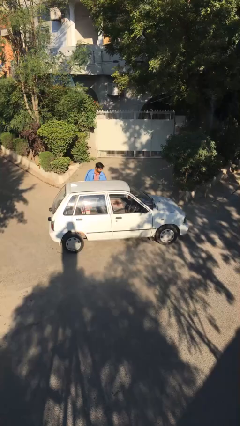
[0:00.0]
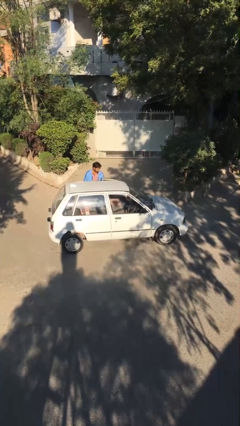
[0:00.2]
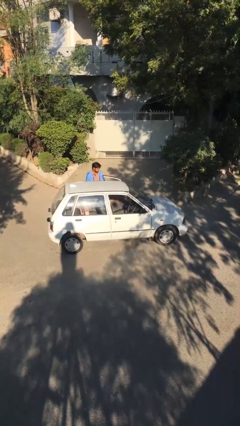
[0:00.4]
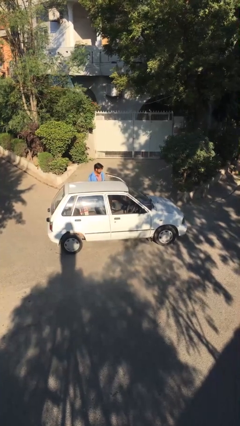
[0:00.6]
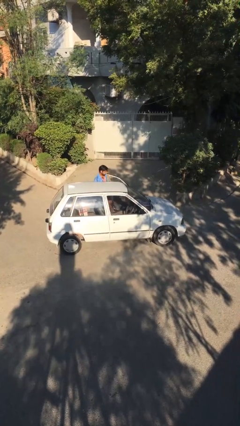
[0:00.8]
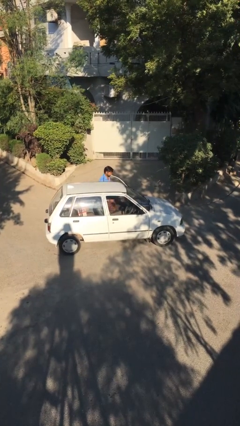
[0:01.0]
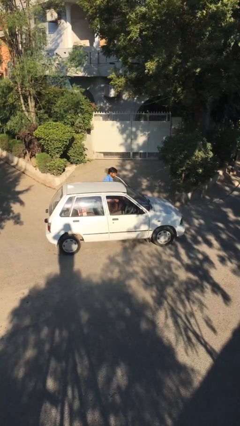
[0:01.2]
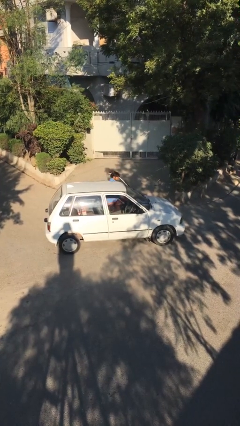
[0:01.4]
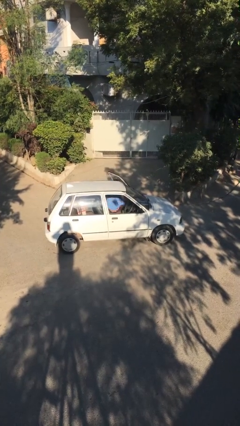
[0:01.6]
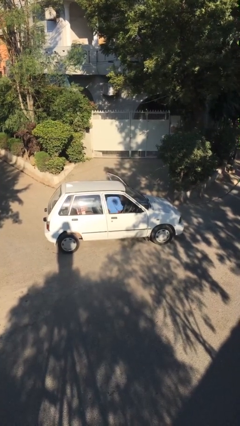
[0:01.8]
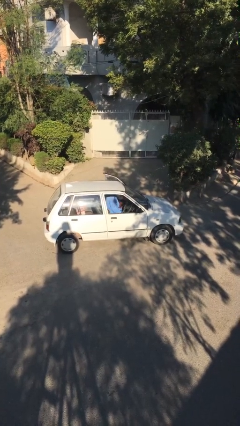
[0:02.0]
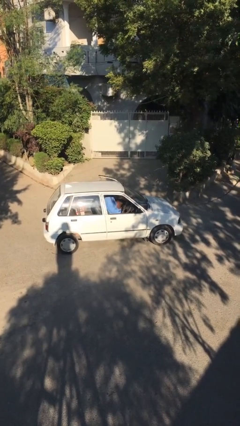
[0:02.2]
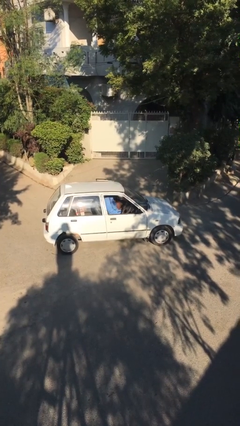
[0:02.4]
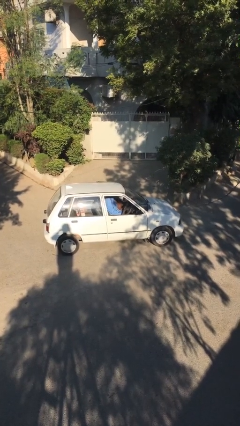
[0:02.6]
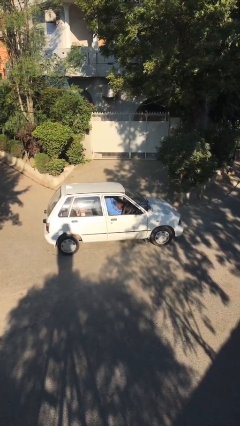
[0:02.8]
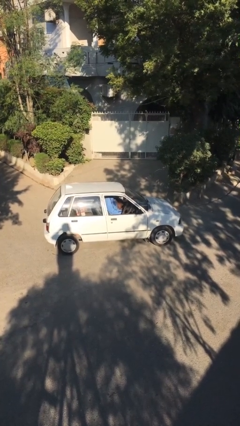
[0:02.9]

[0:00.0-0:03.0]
car picks up person

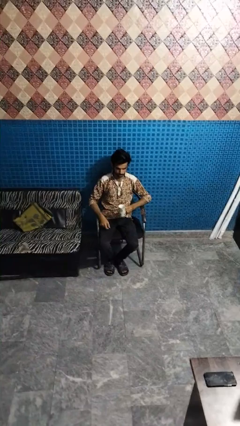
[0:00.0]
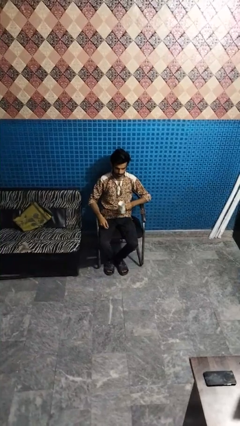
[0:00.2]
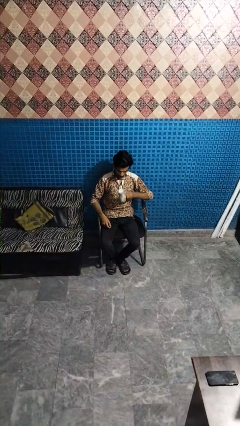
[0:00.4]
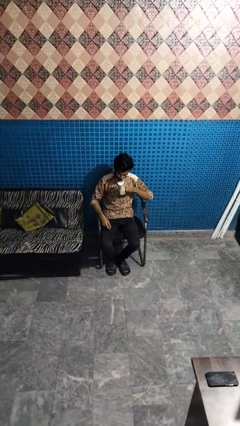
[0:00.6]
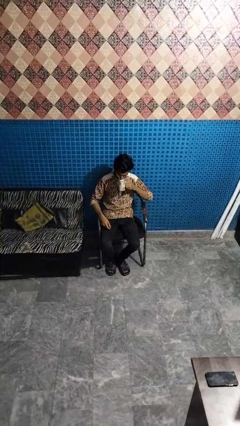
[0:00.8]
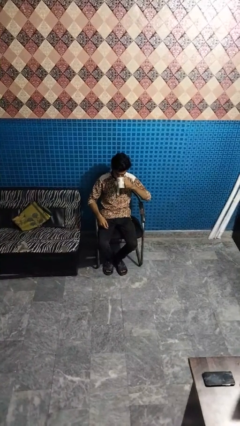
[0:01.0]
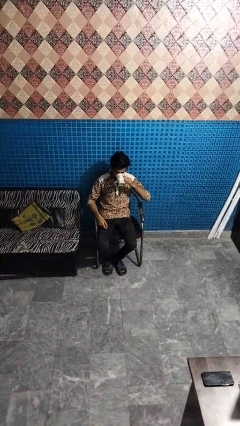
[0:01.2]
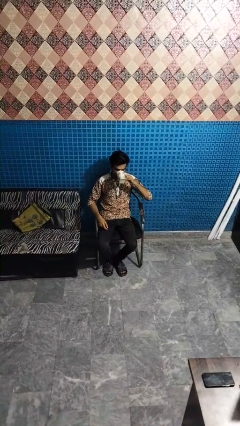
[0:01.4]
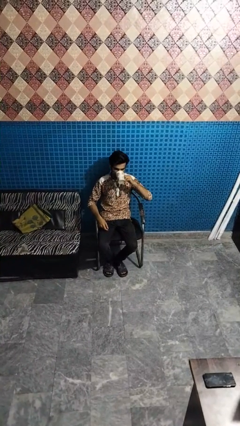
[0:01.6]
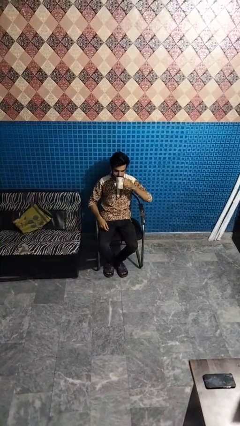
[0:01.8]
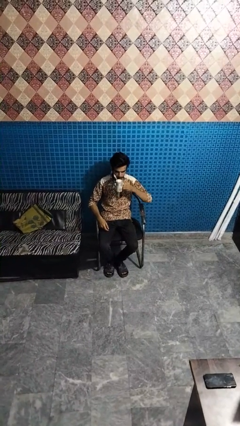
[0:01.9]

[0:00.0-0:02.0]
person drinks from mug

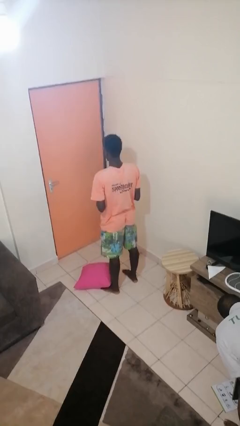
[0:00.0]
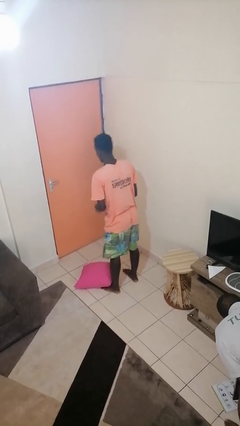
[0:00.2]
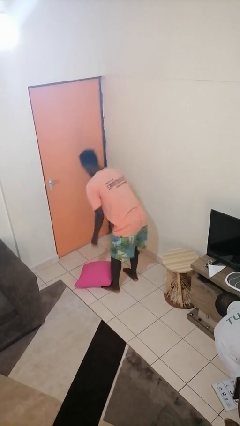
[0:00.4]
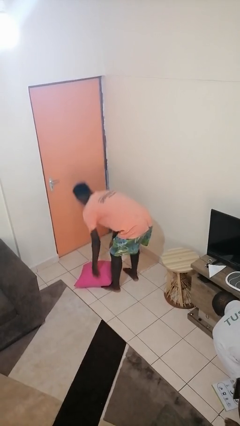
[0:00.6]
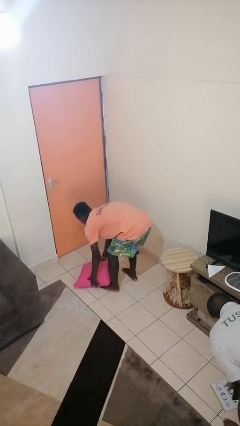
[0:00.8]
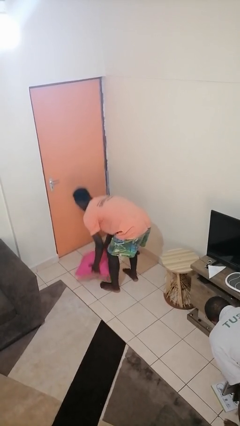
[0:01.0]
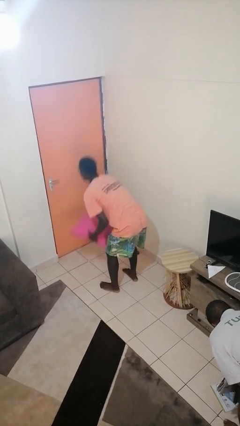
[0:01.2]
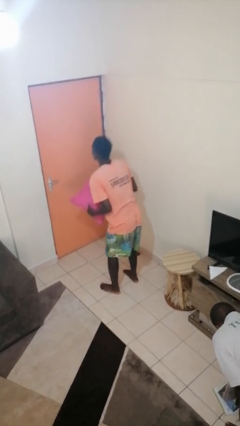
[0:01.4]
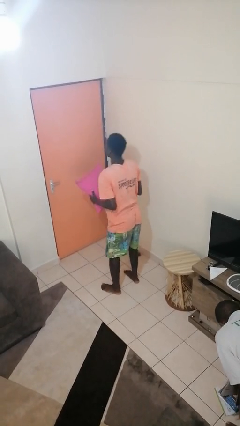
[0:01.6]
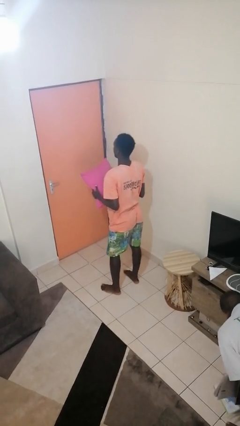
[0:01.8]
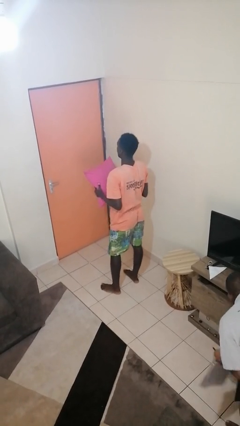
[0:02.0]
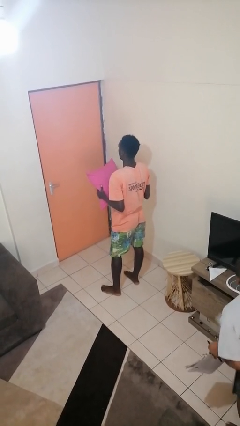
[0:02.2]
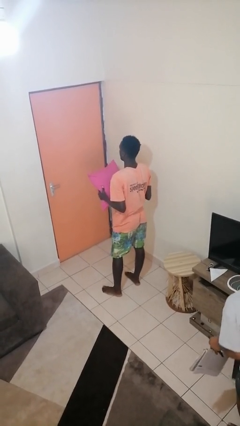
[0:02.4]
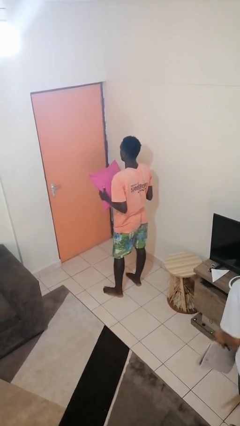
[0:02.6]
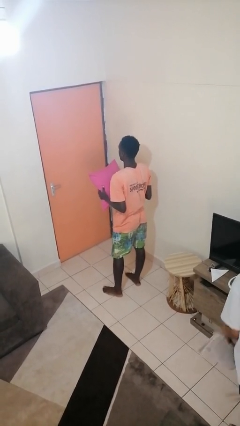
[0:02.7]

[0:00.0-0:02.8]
person picks up object from floor

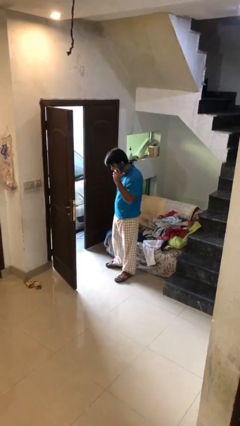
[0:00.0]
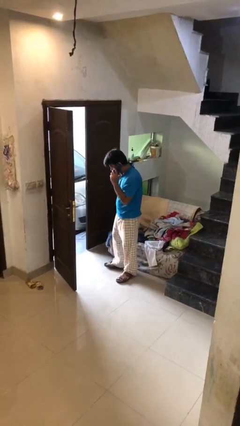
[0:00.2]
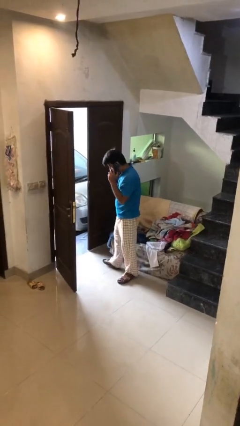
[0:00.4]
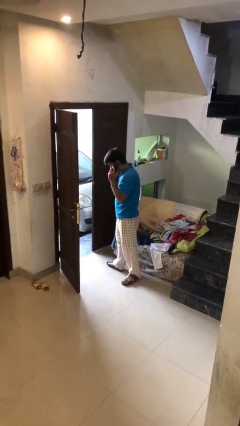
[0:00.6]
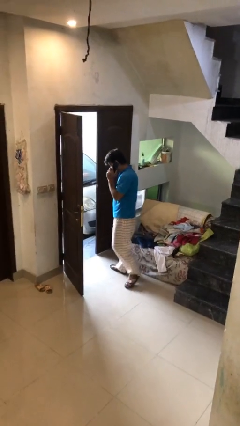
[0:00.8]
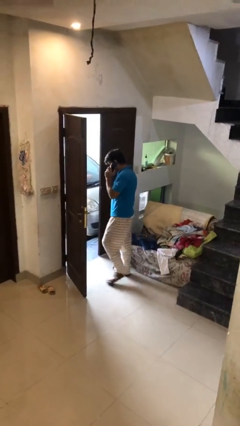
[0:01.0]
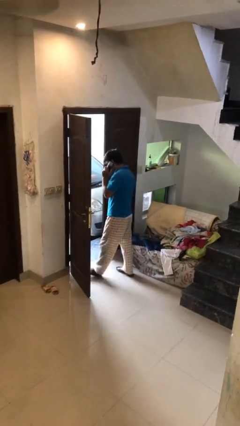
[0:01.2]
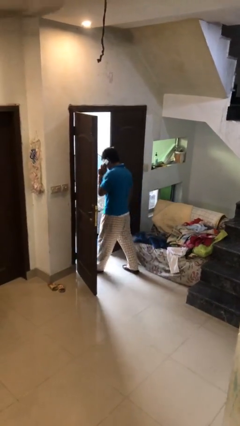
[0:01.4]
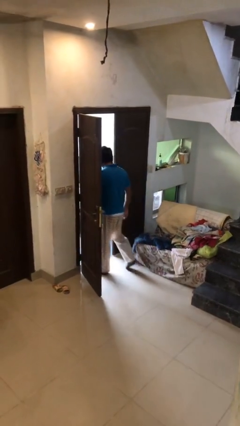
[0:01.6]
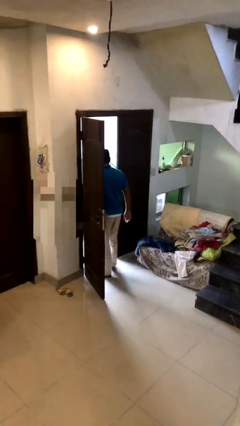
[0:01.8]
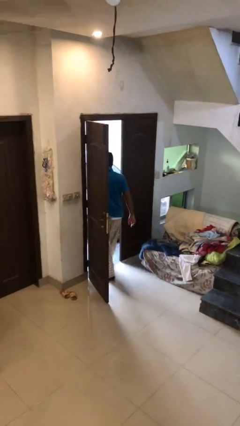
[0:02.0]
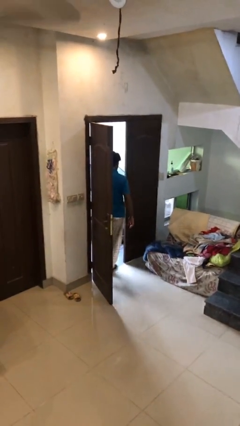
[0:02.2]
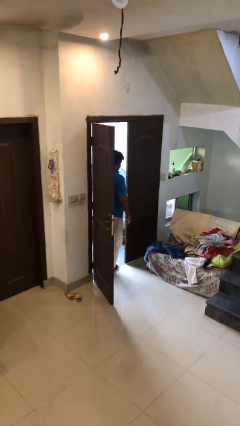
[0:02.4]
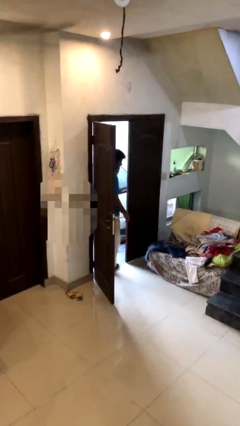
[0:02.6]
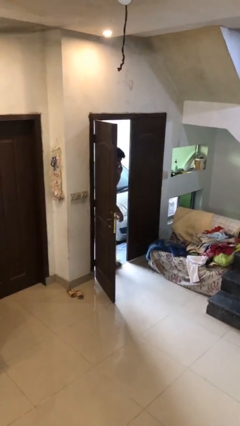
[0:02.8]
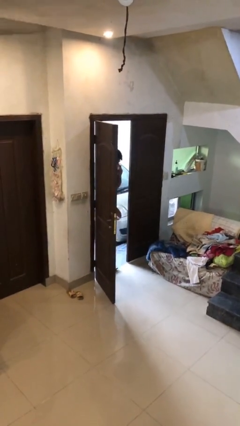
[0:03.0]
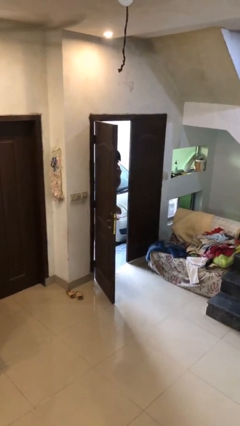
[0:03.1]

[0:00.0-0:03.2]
person exits scene through structure

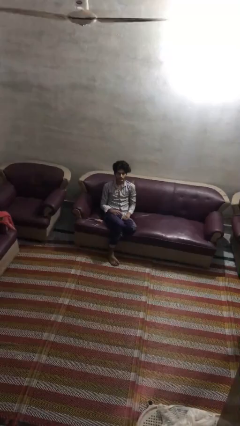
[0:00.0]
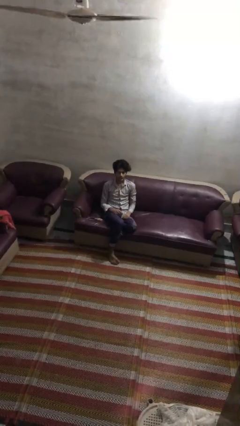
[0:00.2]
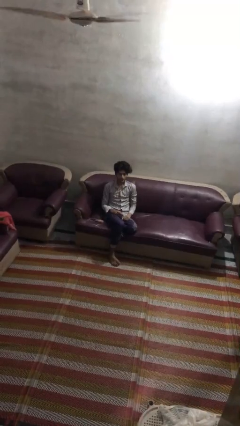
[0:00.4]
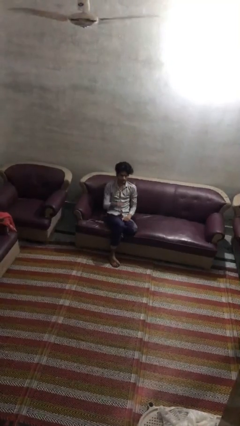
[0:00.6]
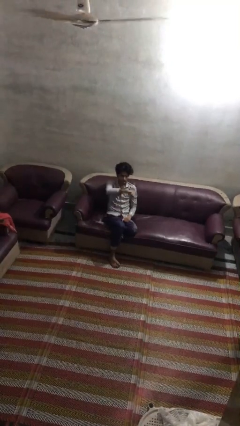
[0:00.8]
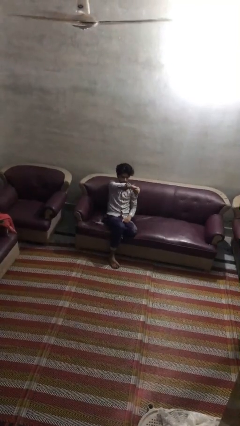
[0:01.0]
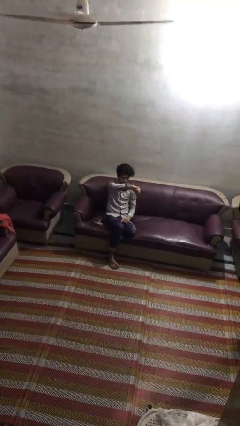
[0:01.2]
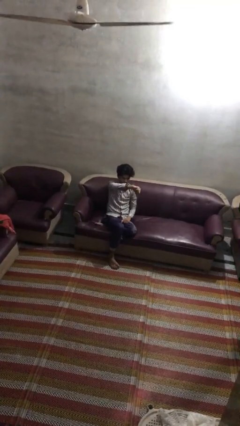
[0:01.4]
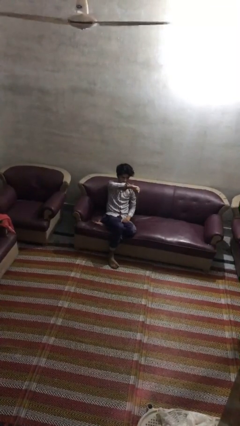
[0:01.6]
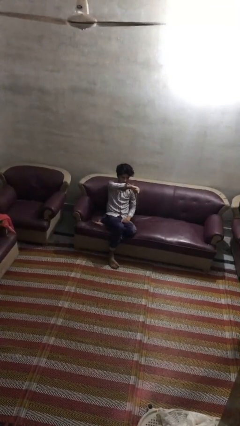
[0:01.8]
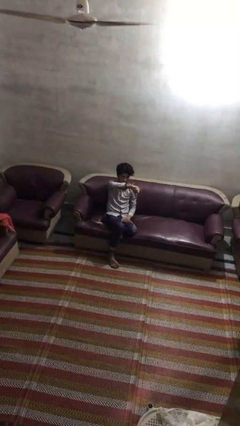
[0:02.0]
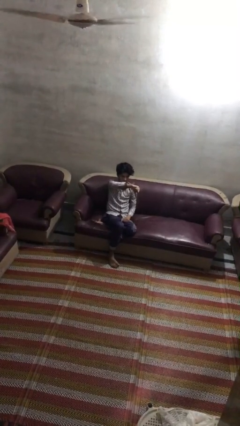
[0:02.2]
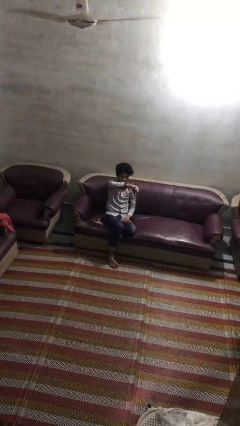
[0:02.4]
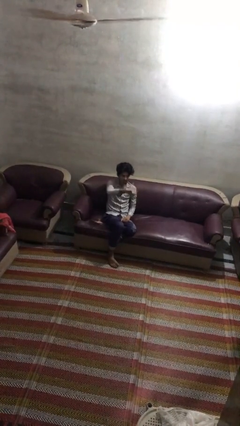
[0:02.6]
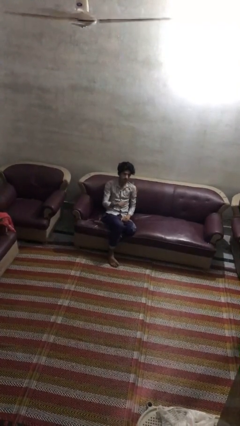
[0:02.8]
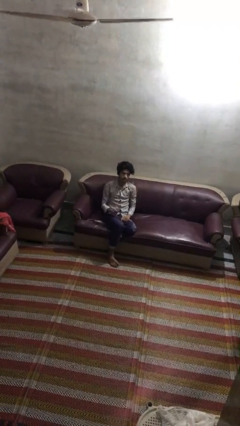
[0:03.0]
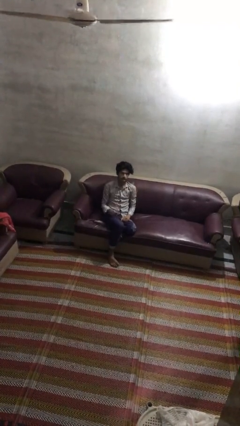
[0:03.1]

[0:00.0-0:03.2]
person gestures thumbs down

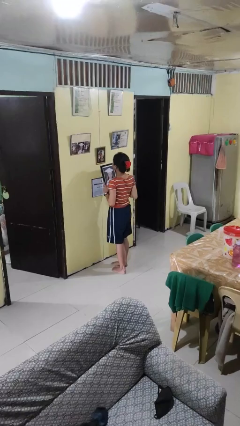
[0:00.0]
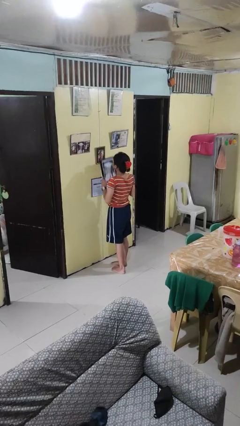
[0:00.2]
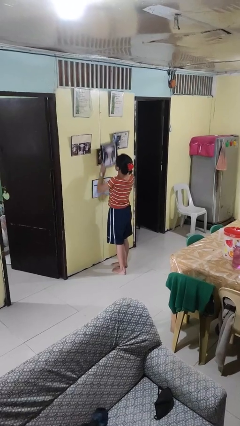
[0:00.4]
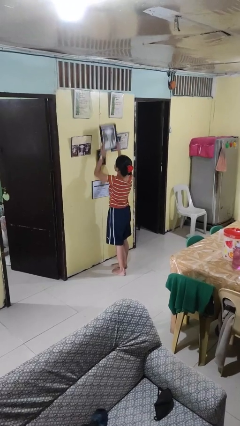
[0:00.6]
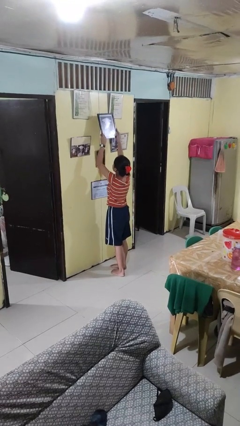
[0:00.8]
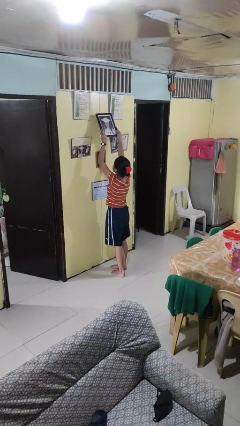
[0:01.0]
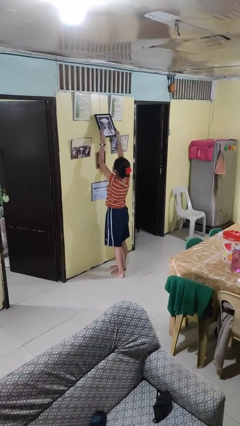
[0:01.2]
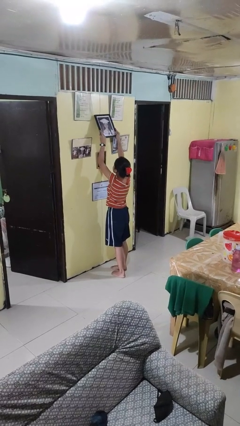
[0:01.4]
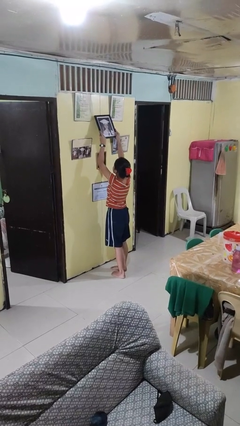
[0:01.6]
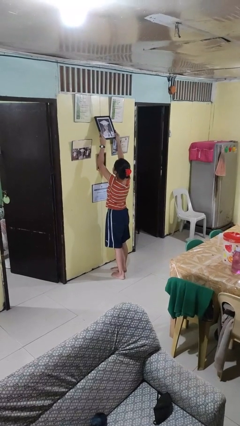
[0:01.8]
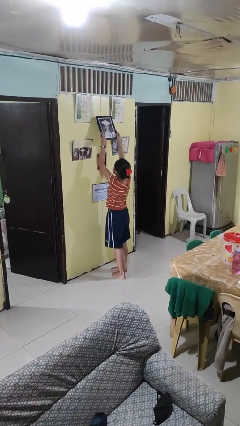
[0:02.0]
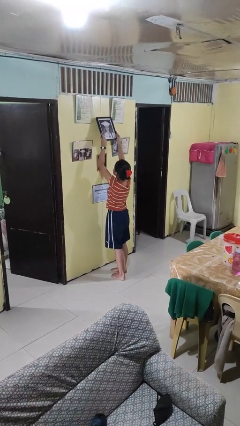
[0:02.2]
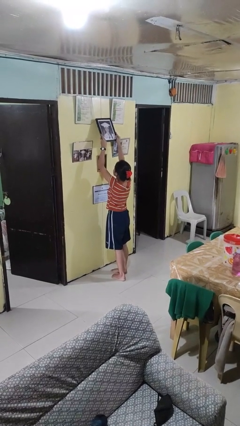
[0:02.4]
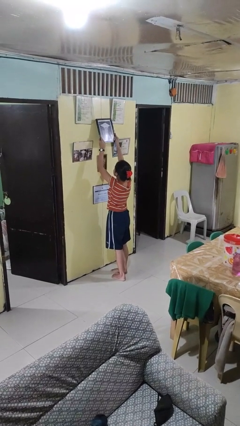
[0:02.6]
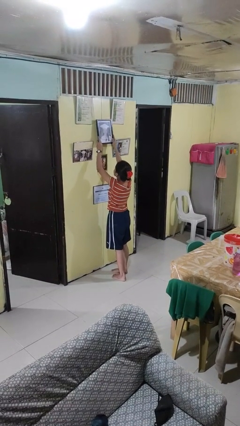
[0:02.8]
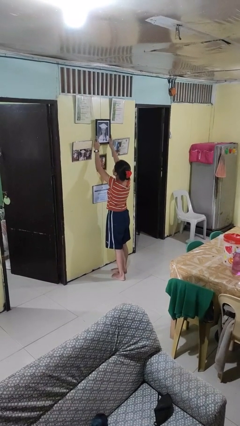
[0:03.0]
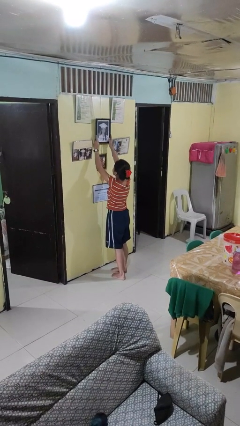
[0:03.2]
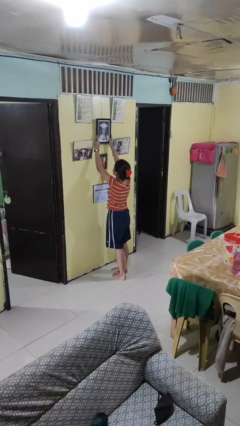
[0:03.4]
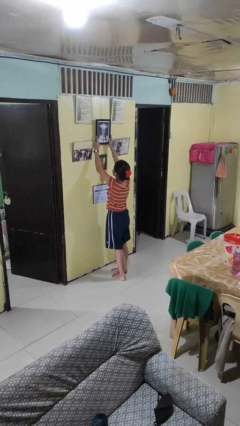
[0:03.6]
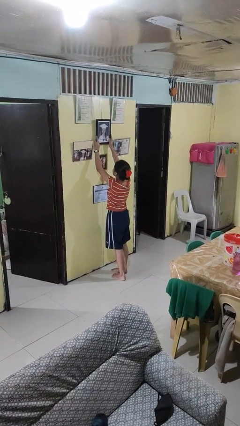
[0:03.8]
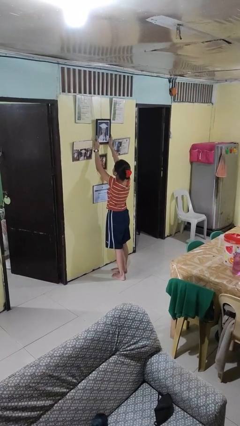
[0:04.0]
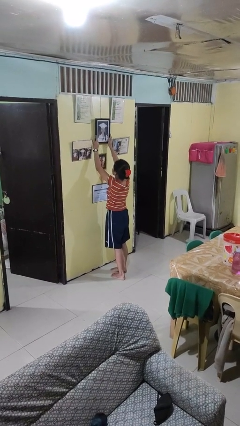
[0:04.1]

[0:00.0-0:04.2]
person puts up picture frame
